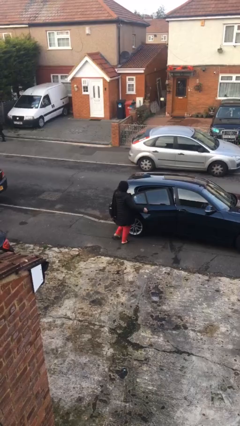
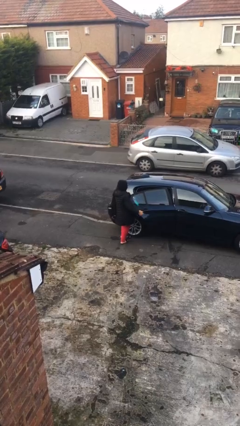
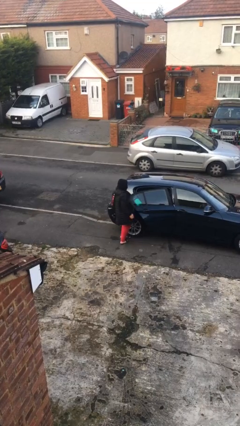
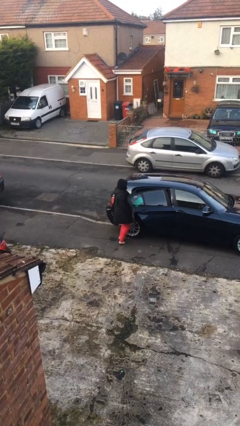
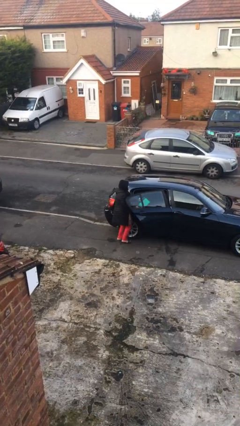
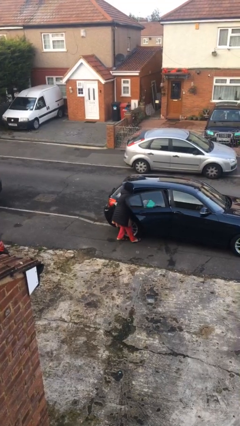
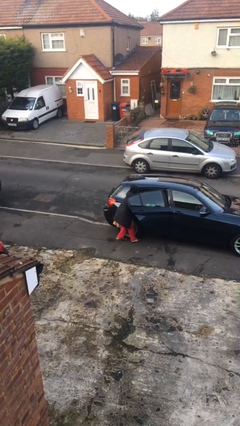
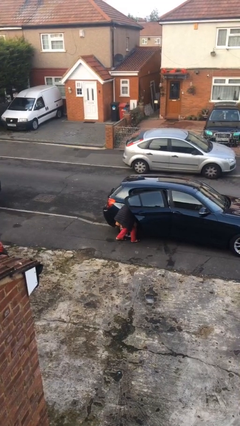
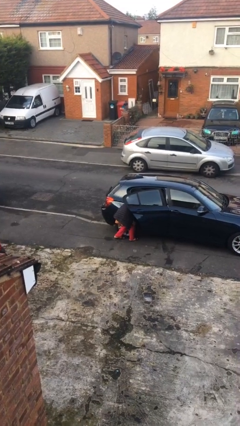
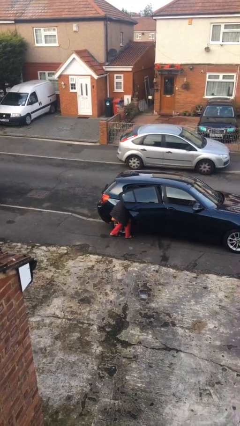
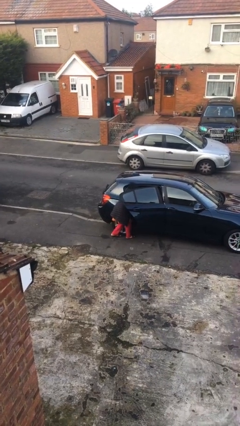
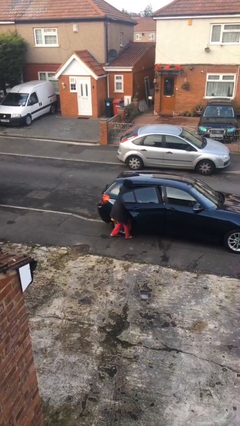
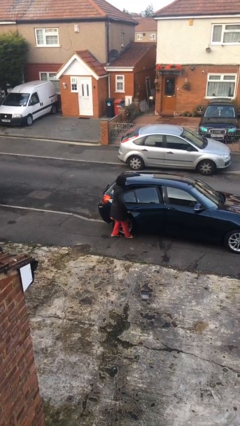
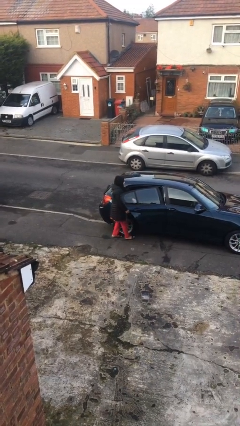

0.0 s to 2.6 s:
person loads car

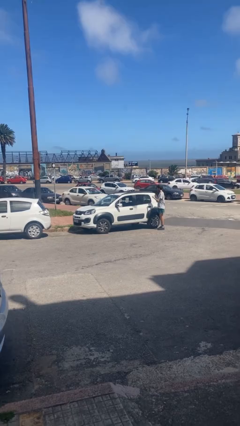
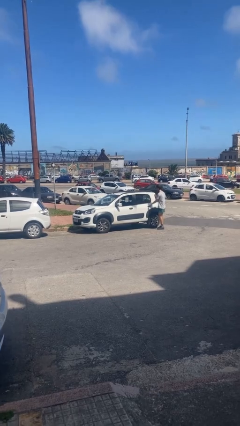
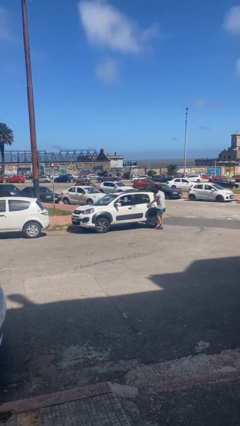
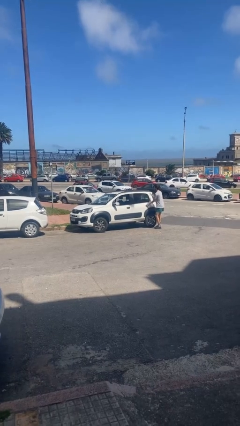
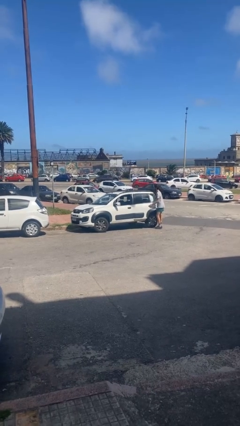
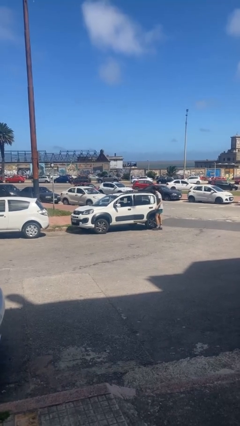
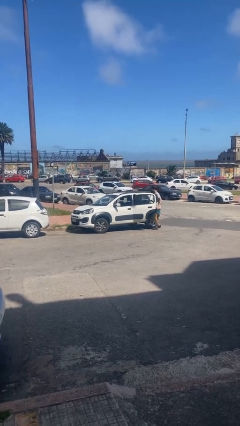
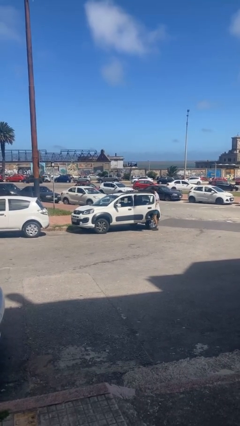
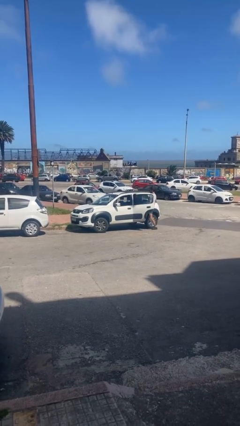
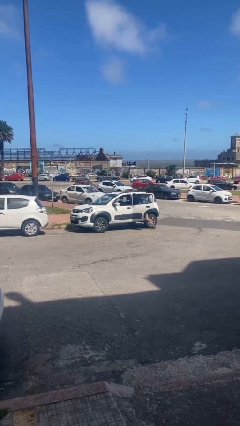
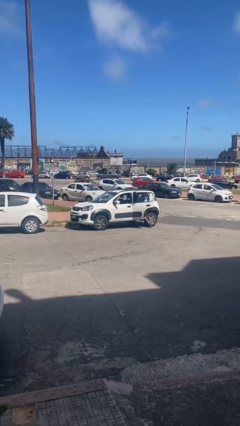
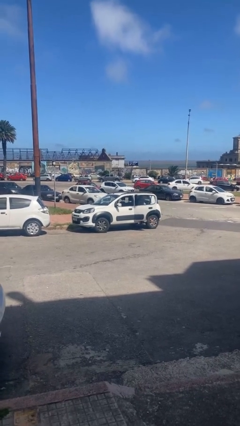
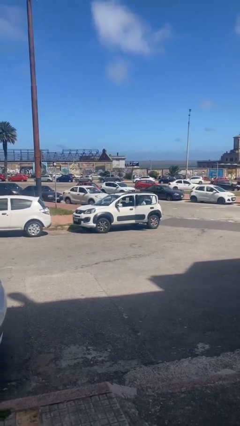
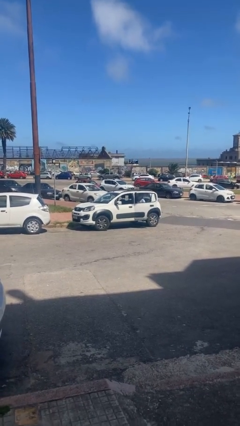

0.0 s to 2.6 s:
car picks up person

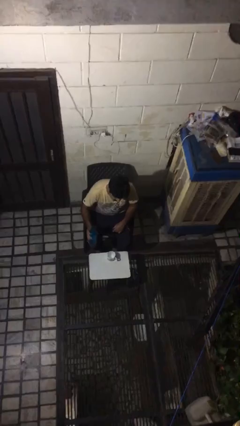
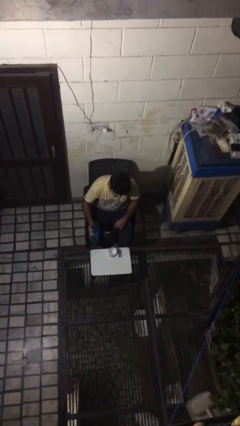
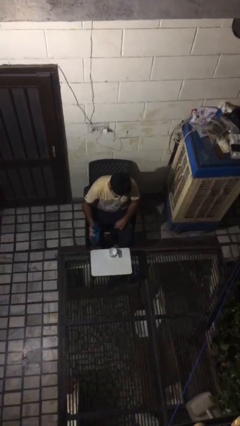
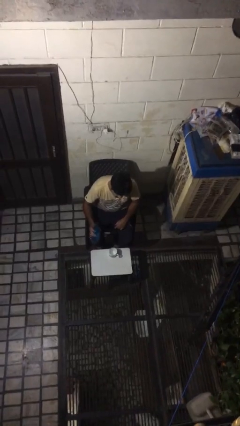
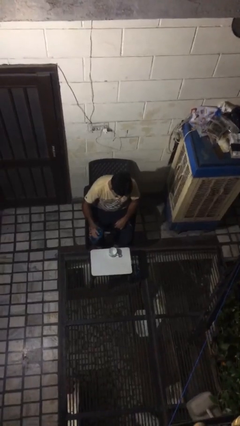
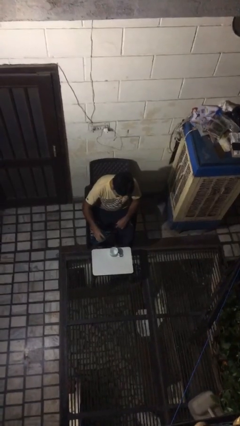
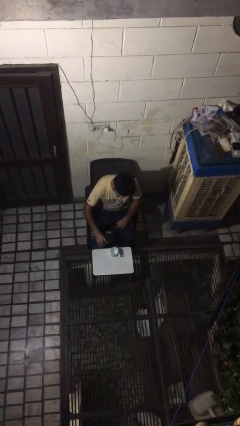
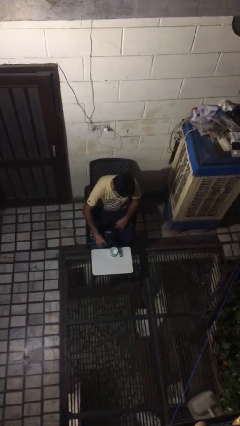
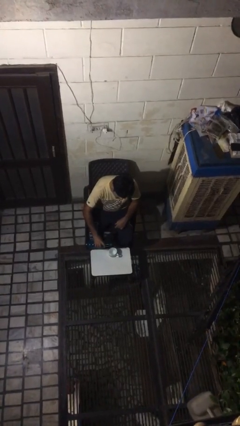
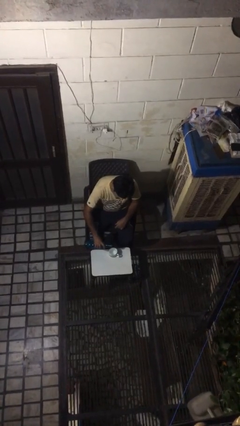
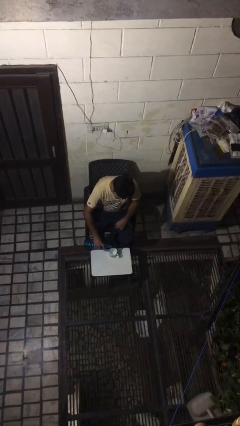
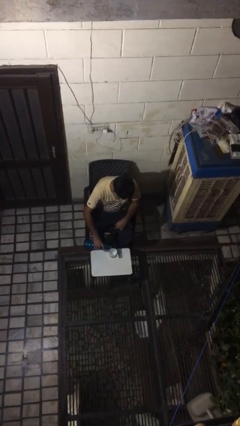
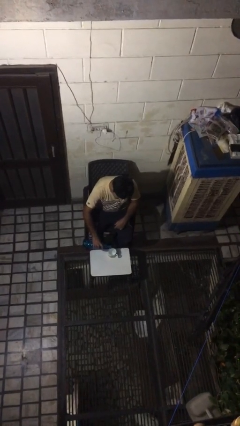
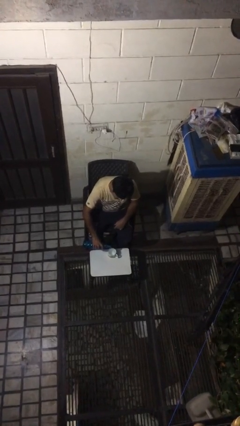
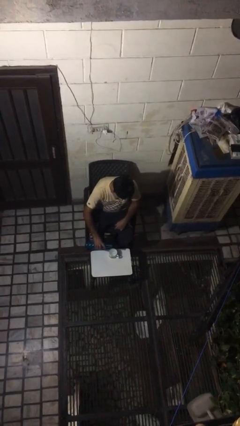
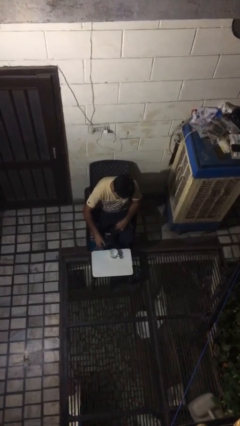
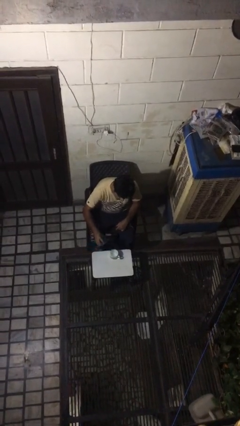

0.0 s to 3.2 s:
person pours liquid into cup

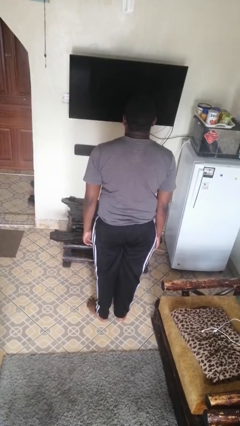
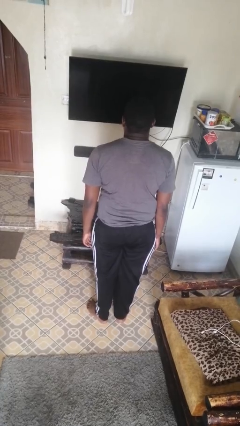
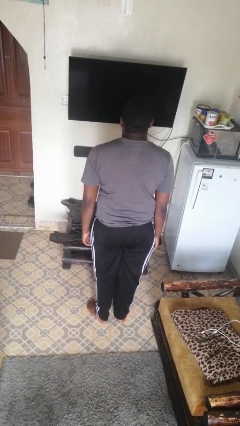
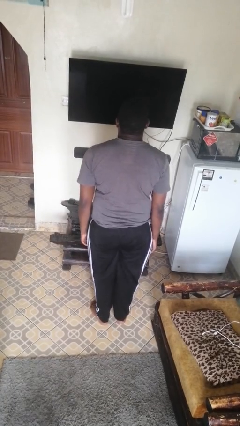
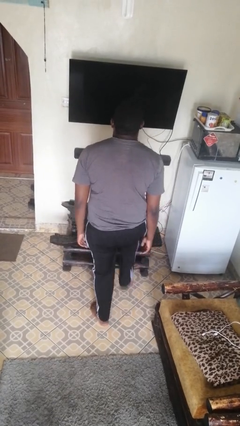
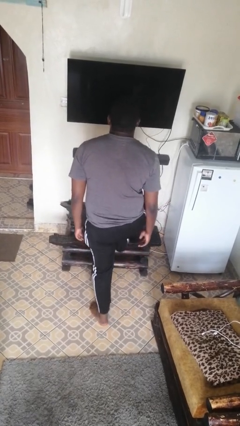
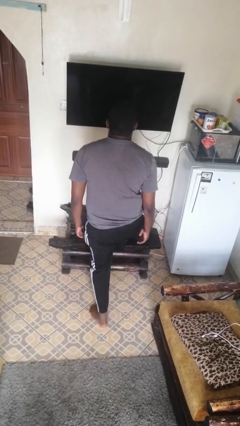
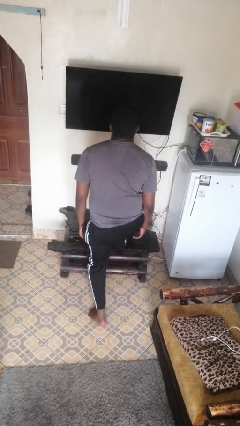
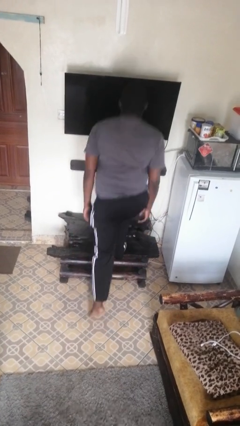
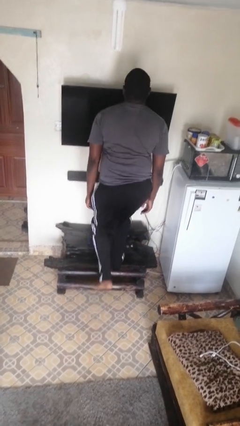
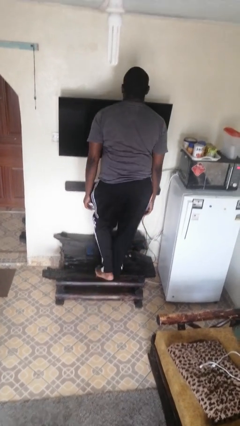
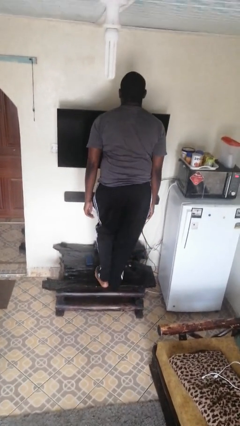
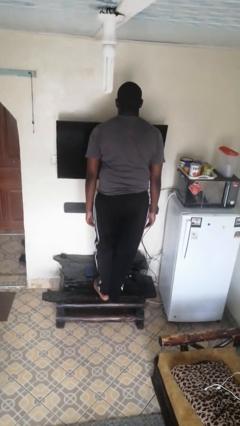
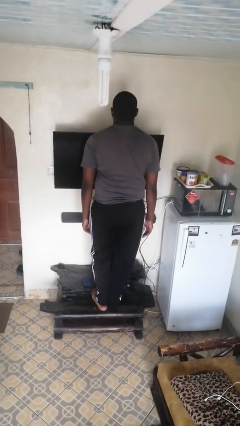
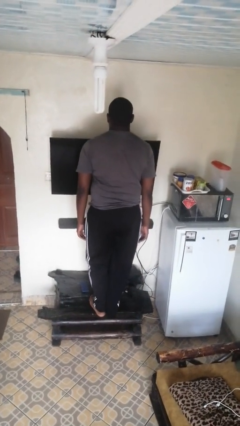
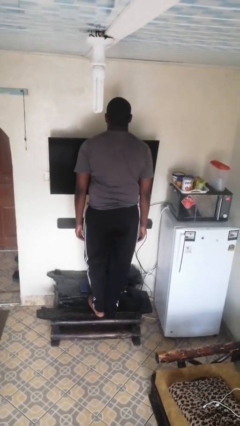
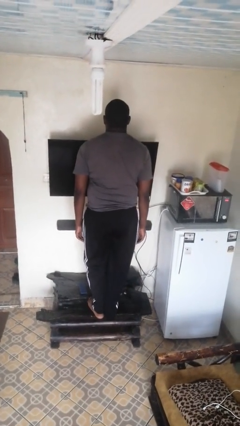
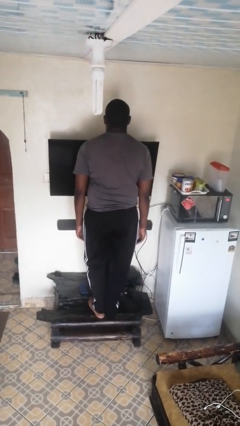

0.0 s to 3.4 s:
person climbs on table

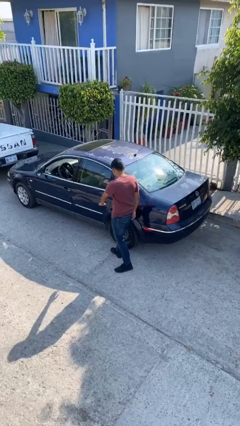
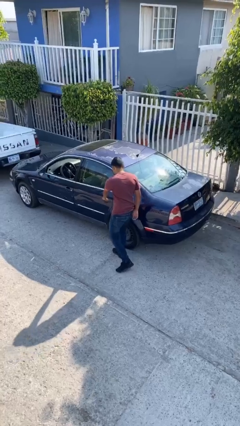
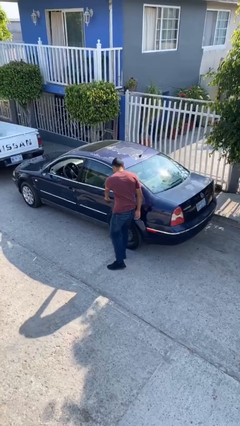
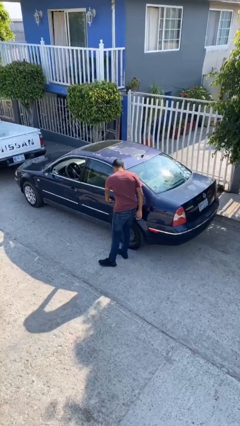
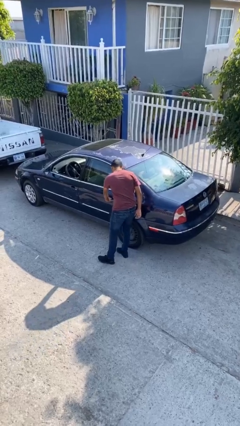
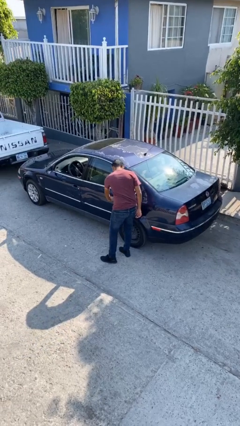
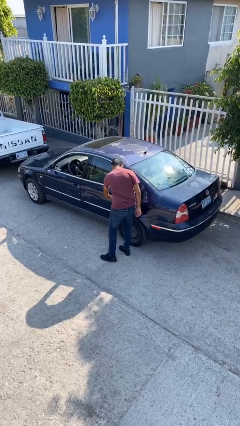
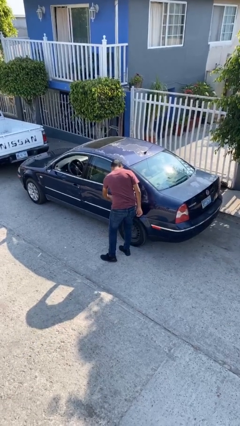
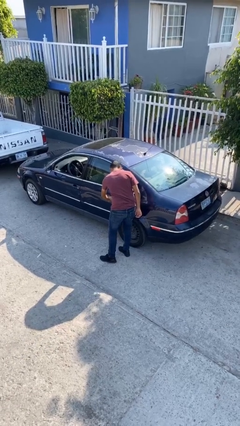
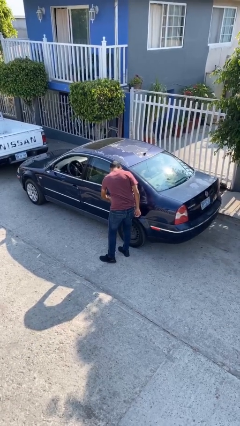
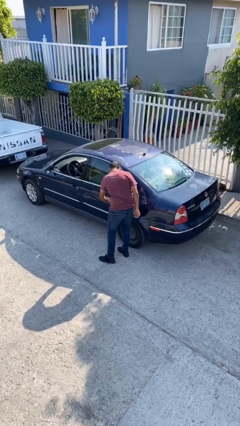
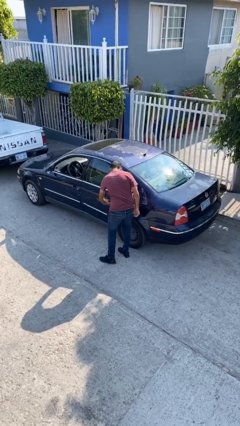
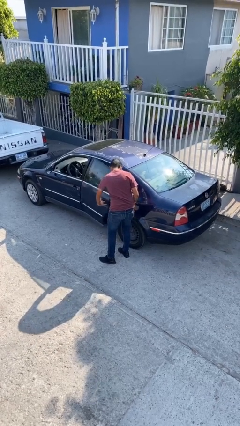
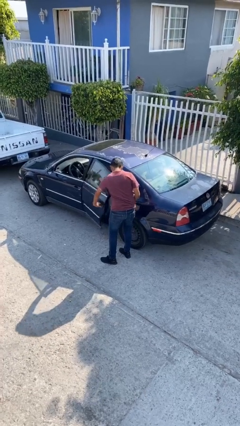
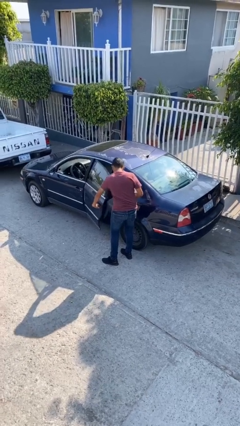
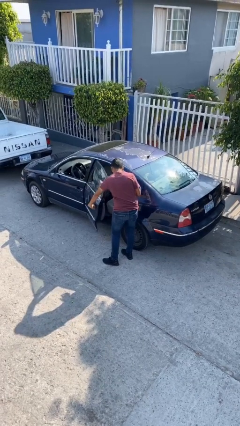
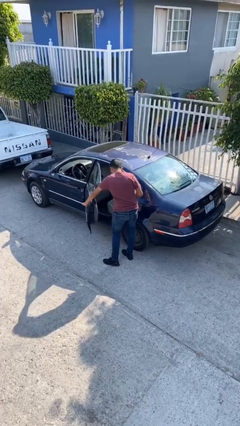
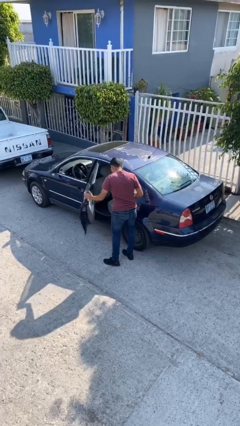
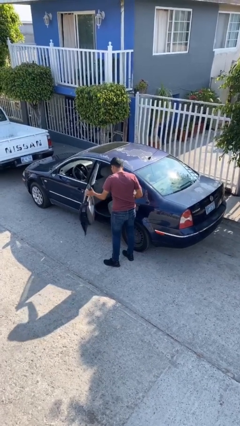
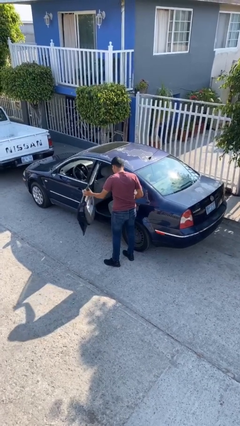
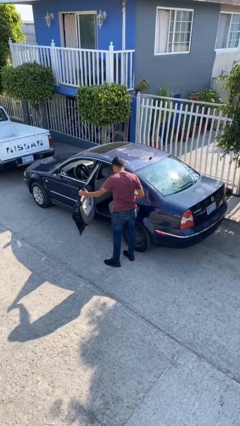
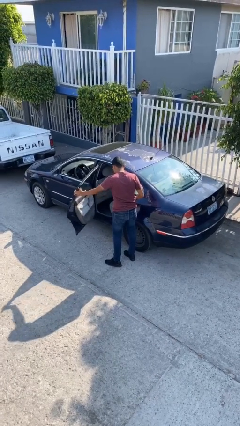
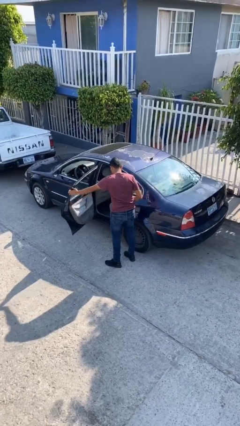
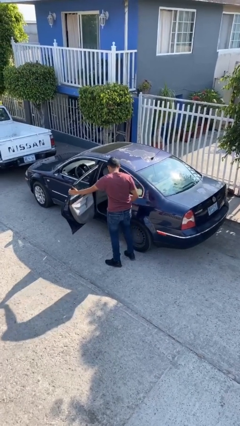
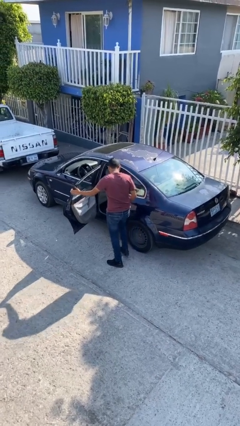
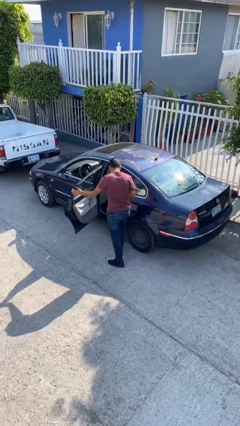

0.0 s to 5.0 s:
person opens car door

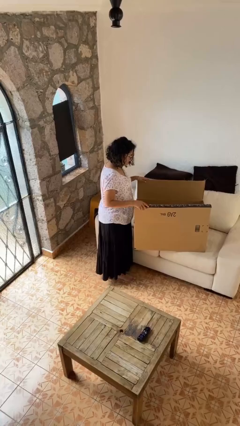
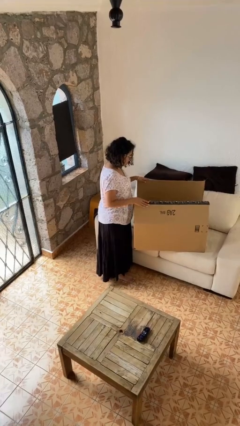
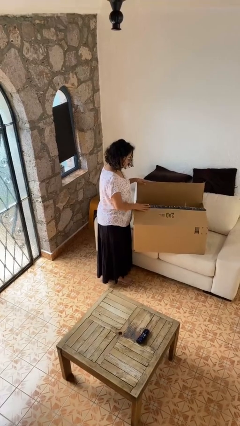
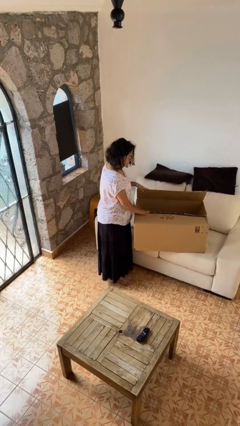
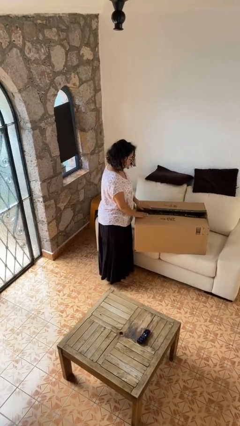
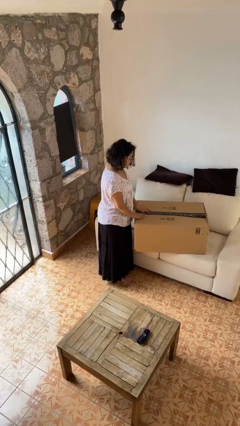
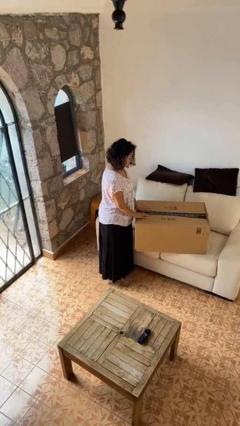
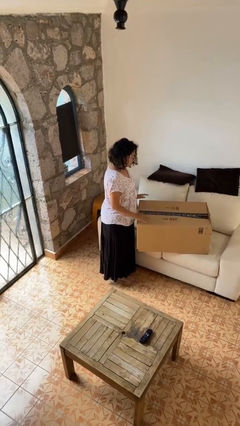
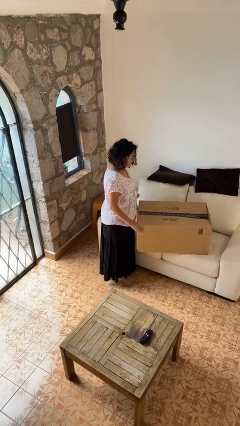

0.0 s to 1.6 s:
person closes box
